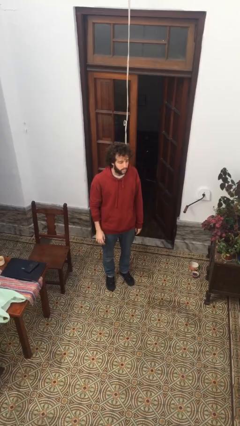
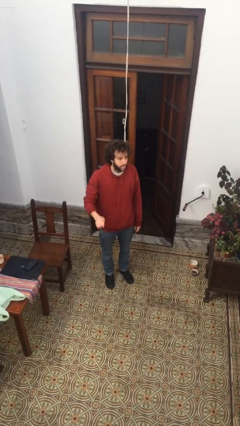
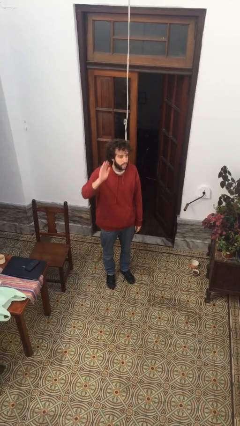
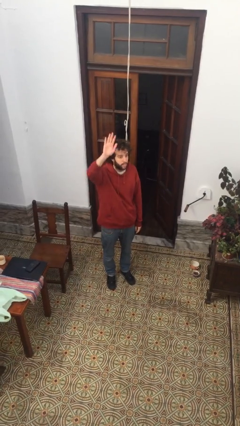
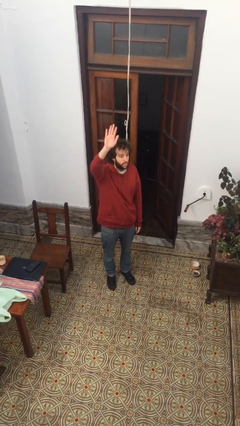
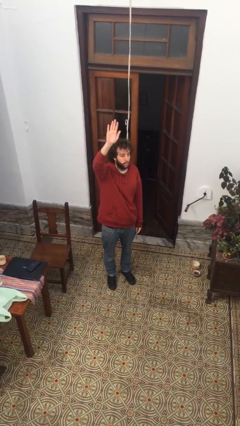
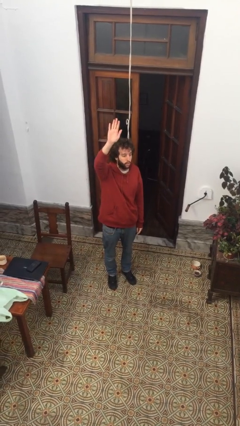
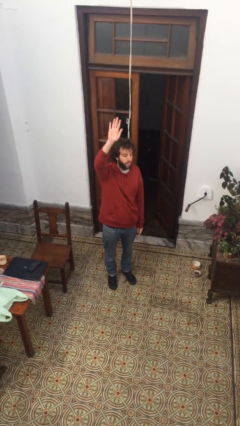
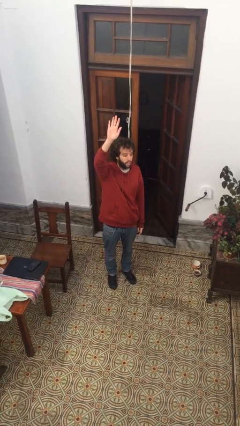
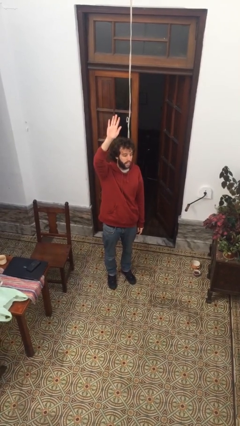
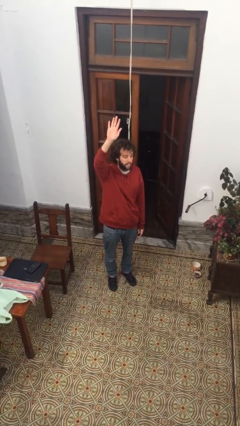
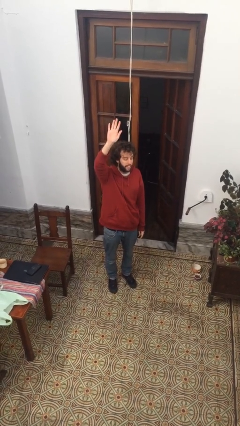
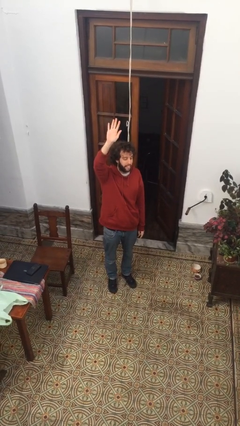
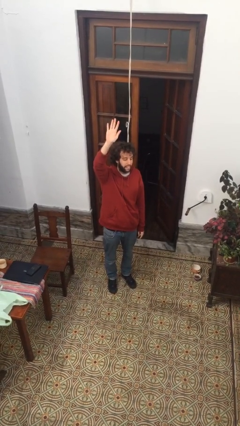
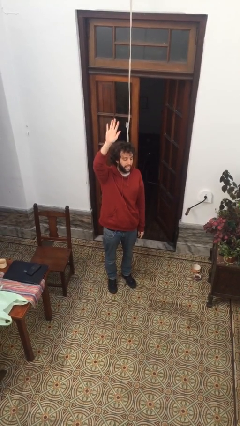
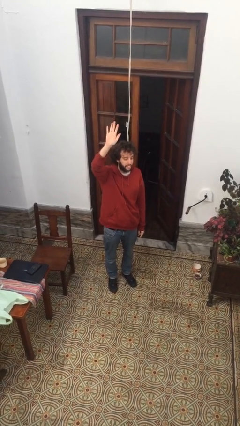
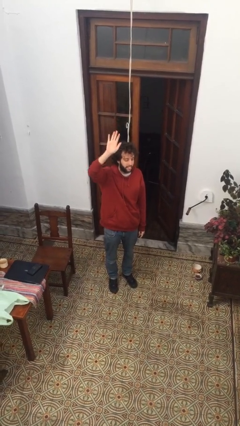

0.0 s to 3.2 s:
person gestures raise hand

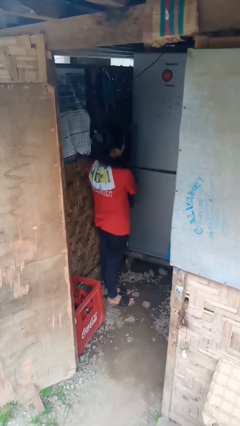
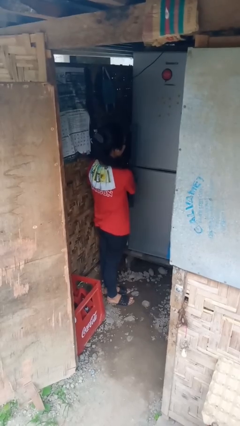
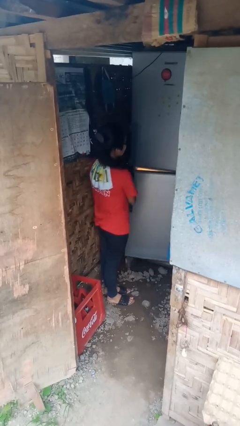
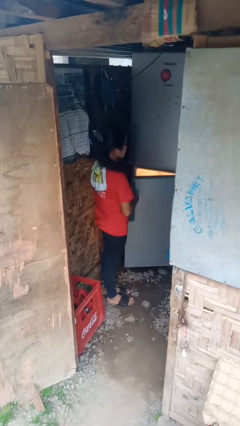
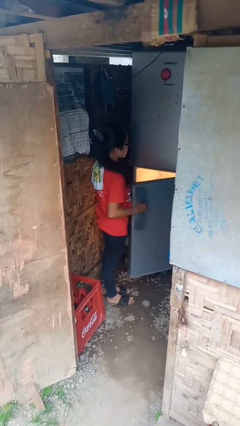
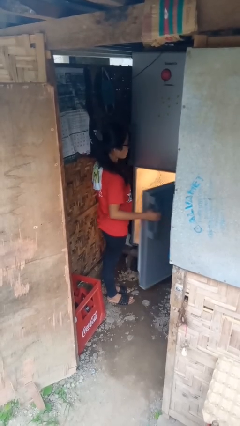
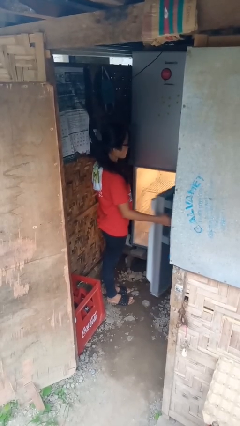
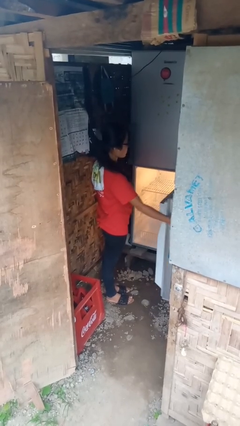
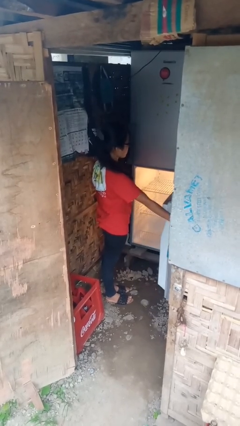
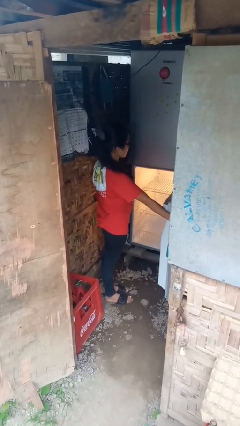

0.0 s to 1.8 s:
person opens refrigerator

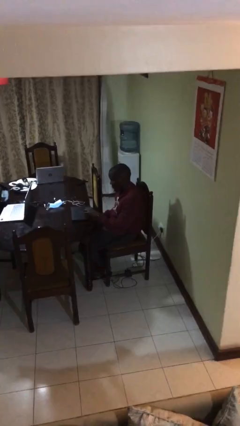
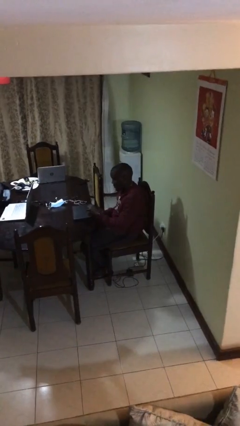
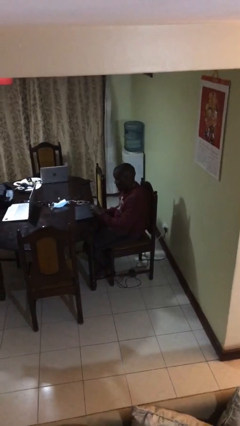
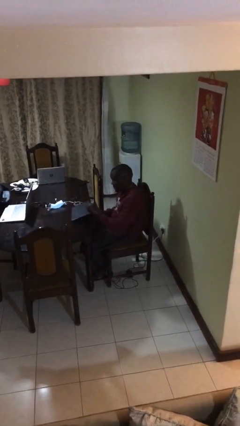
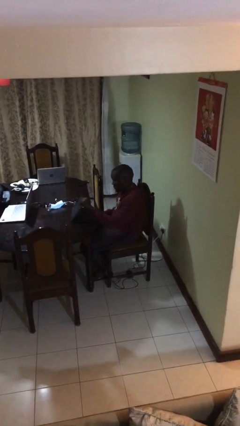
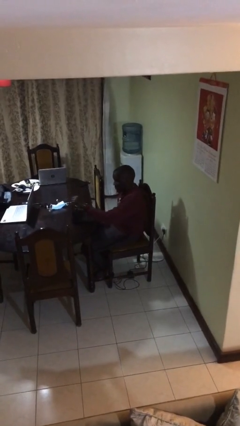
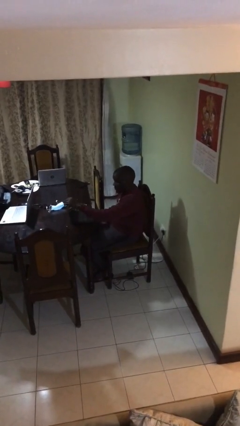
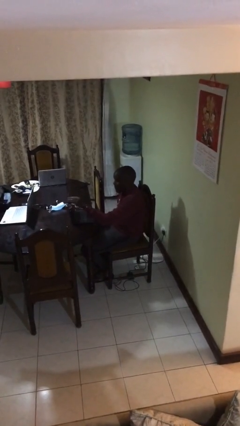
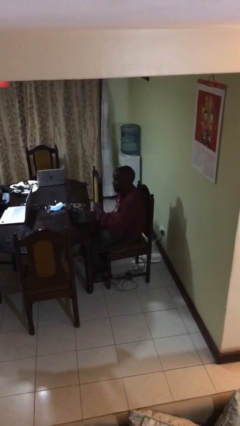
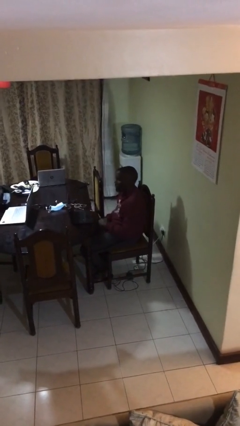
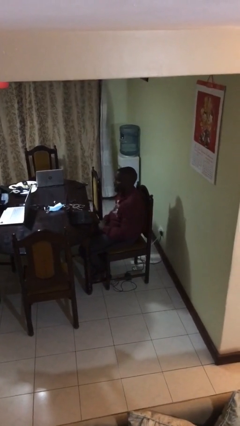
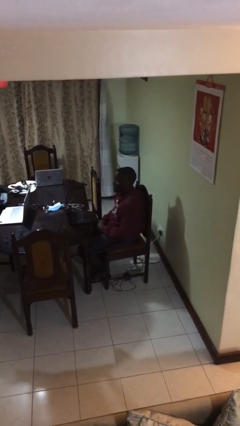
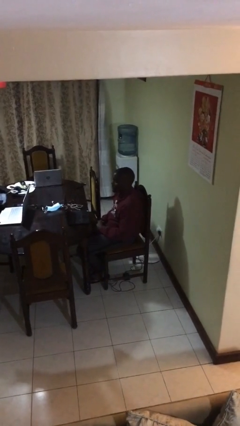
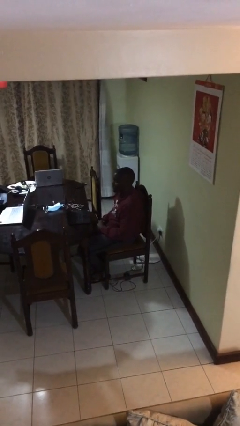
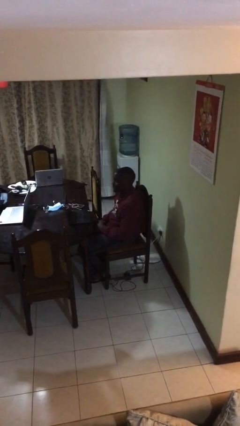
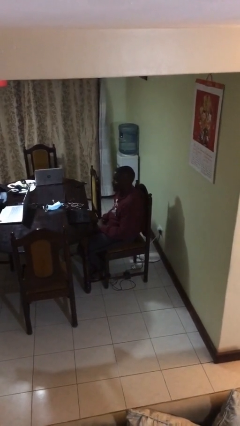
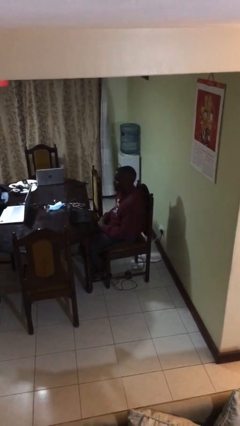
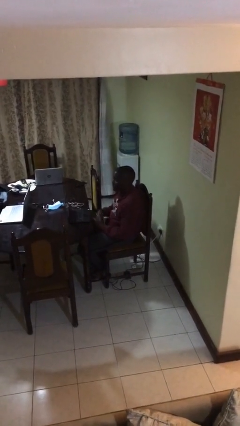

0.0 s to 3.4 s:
person opens laptop

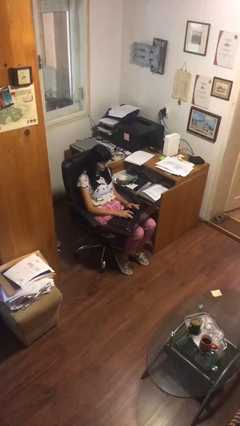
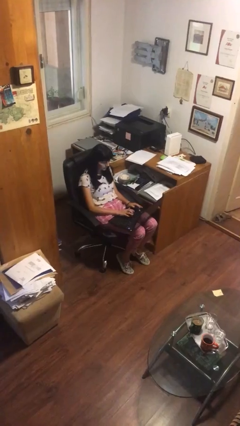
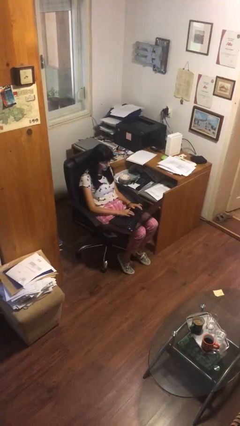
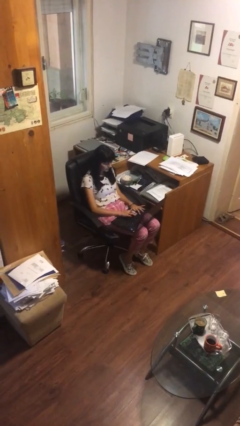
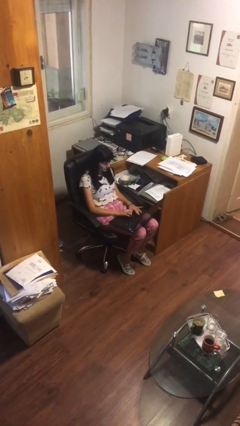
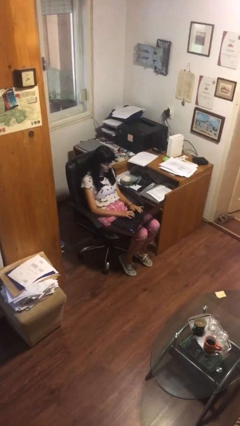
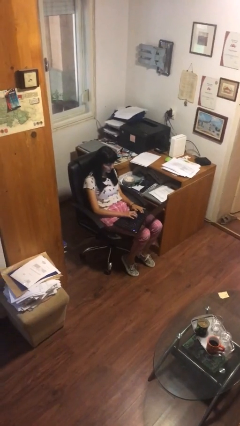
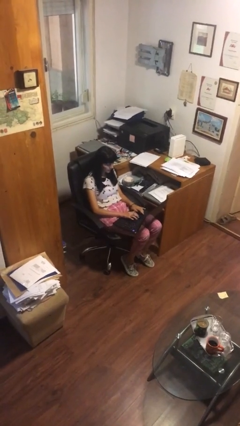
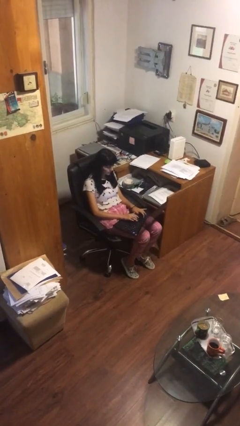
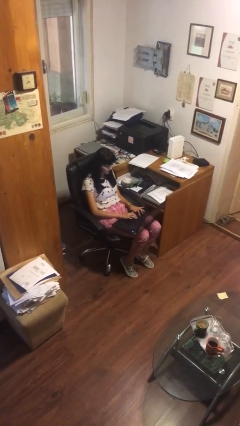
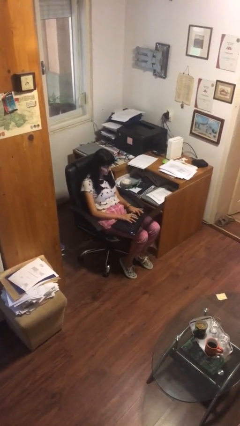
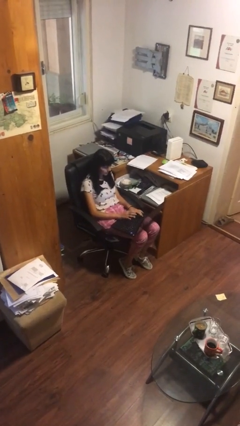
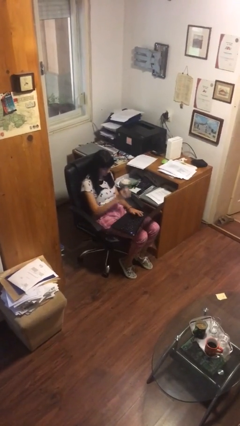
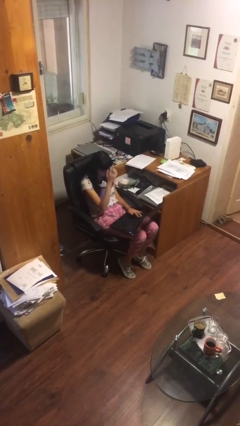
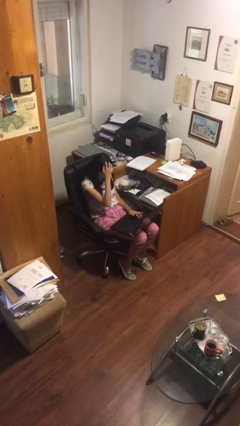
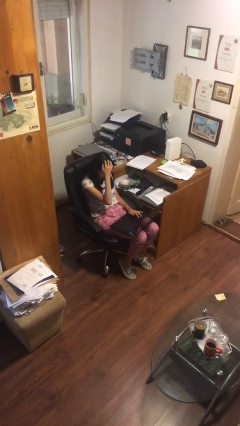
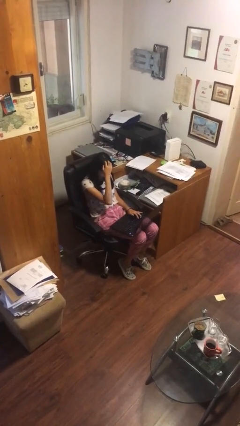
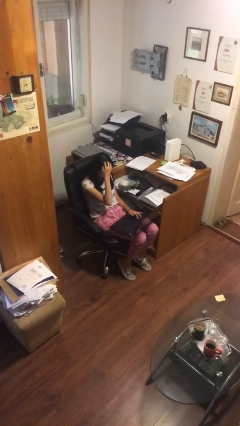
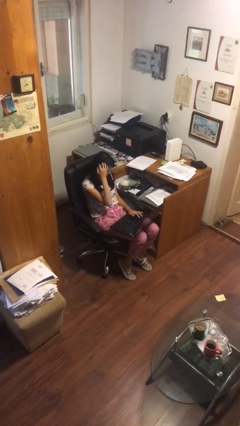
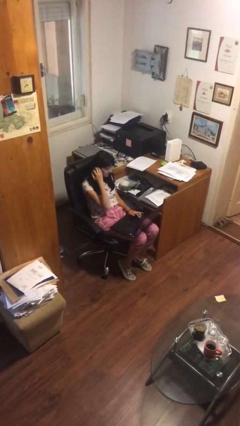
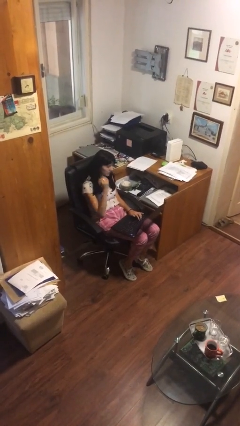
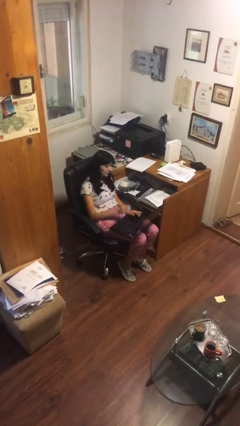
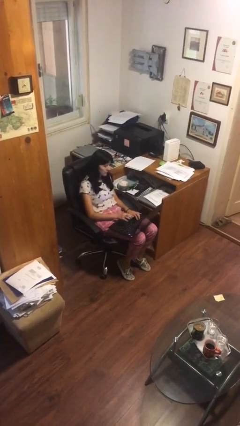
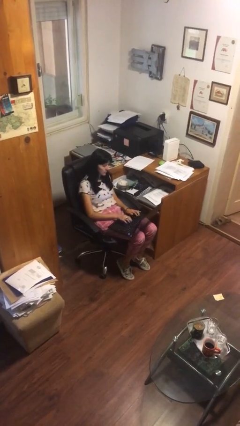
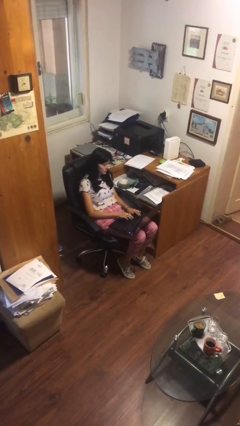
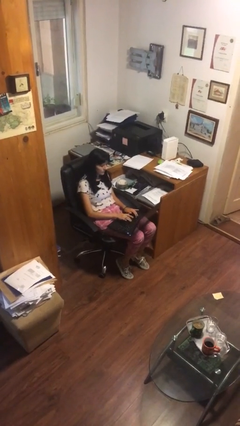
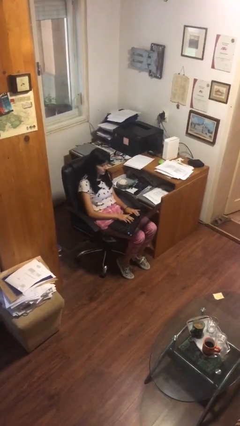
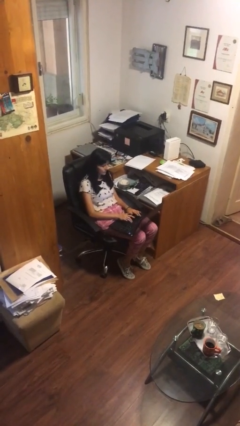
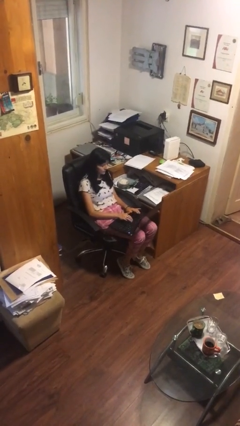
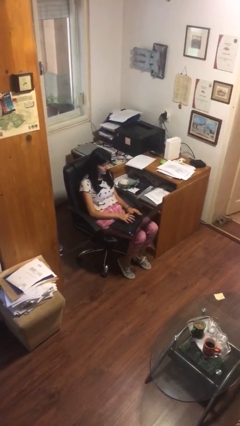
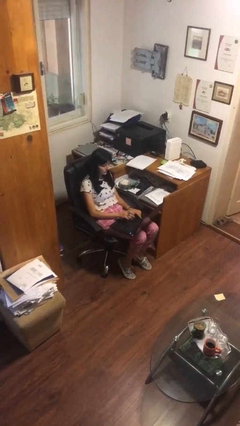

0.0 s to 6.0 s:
person interacts with laptop

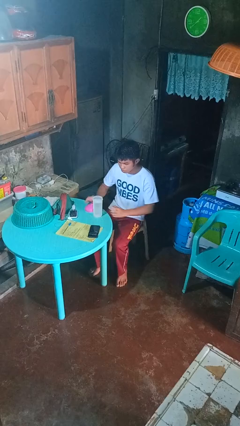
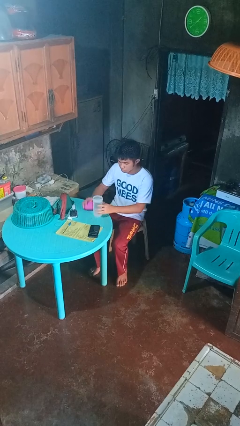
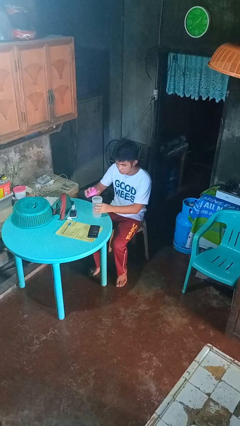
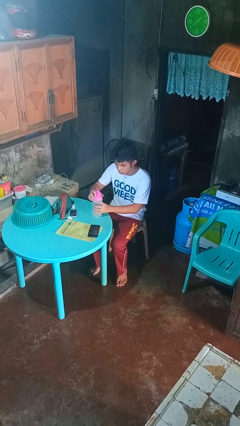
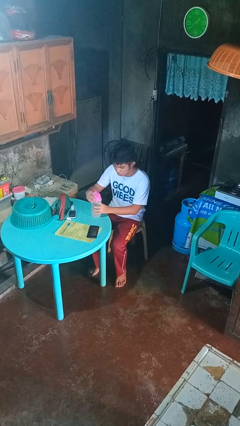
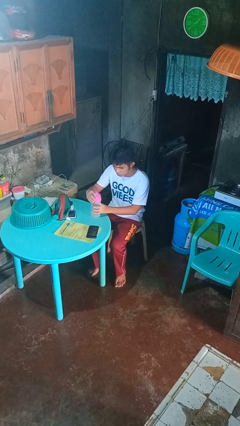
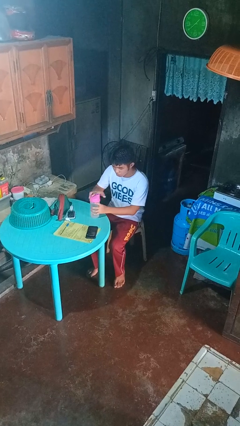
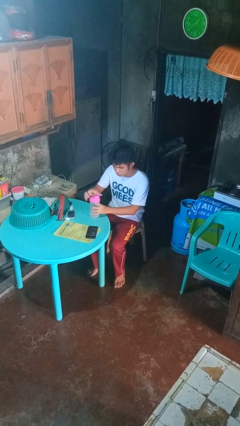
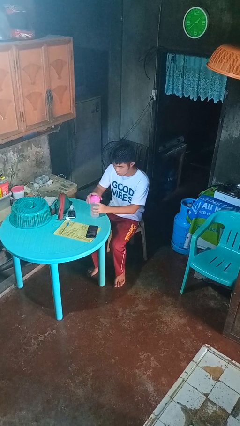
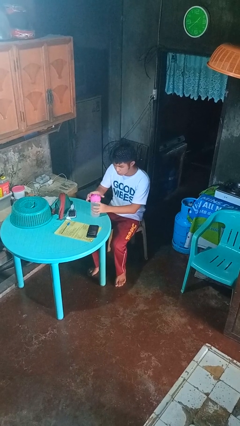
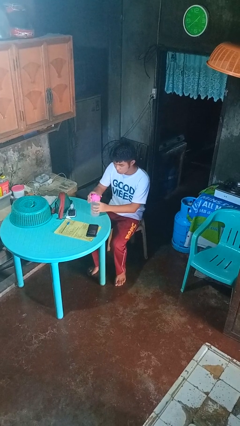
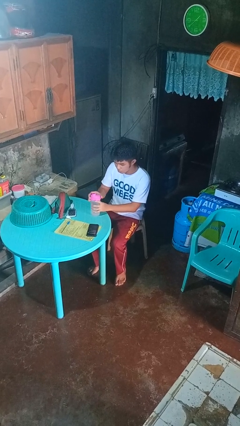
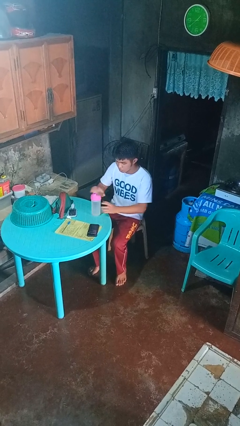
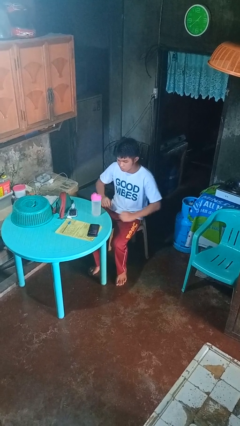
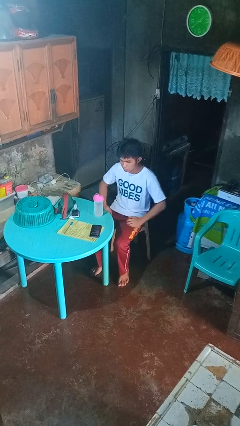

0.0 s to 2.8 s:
person screws lid to bottle

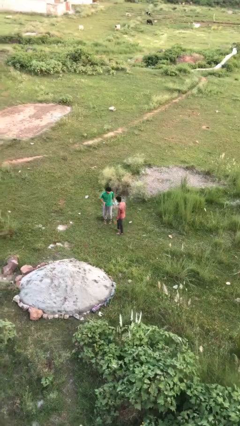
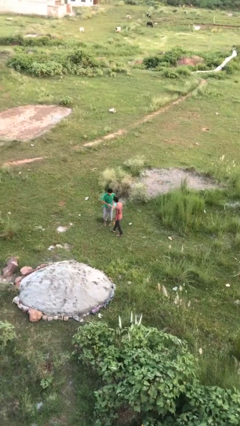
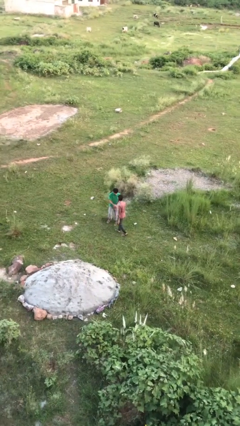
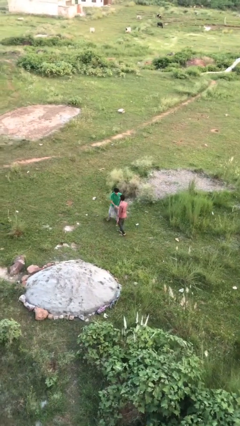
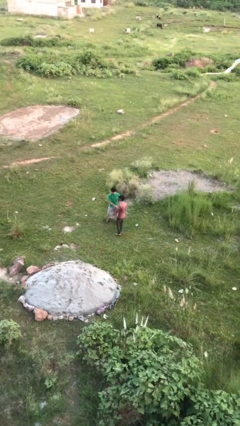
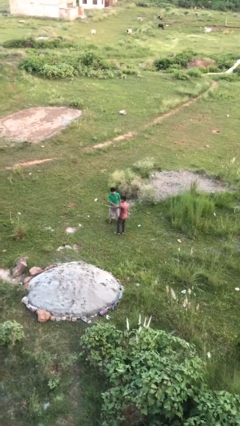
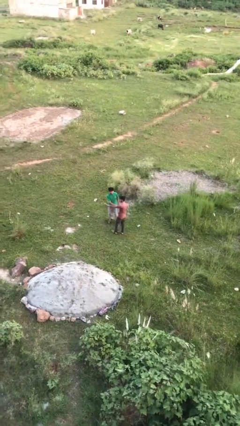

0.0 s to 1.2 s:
person shakes hand
